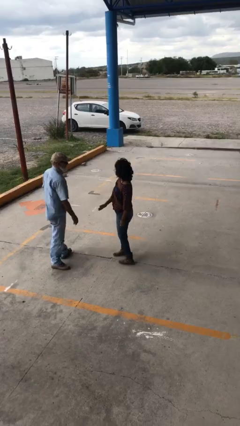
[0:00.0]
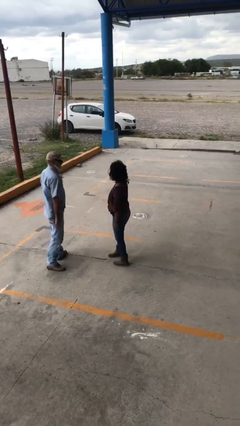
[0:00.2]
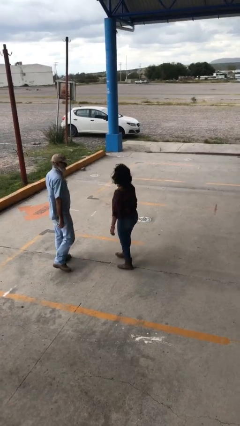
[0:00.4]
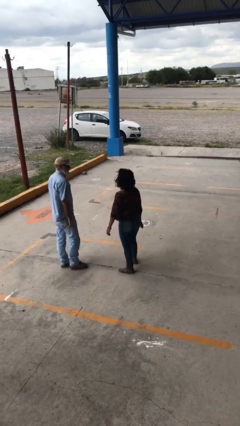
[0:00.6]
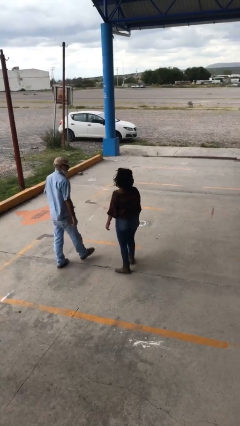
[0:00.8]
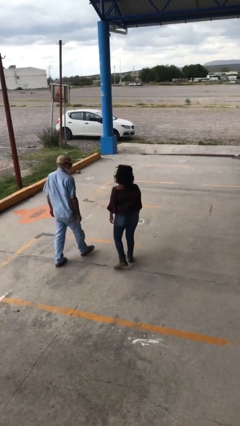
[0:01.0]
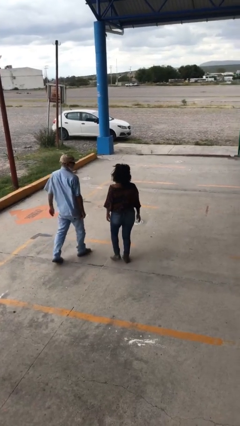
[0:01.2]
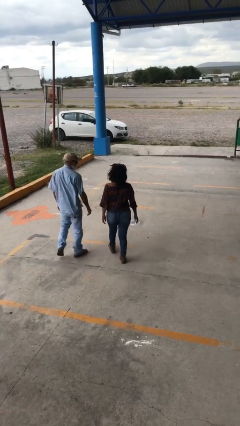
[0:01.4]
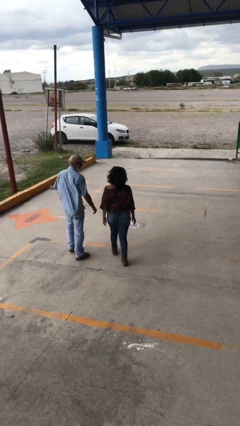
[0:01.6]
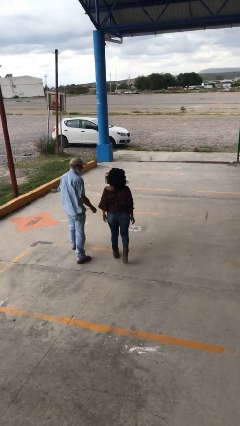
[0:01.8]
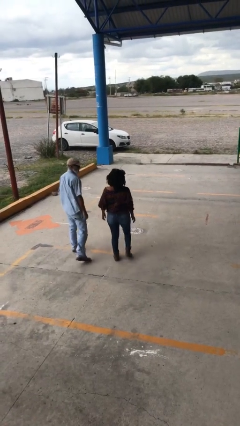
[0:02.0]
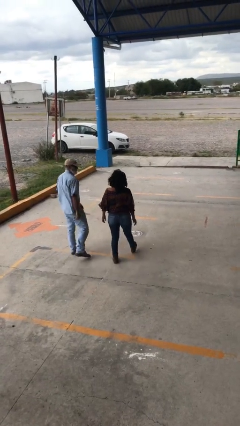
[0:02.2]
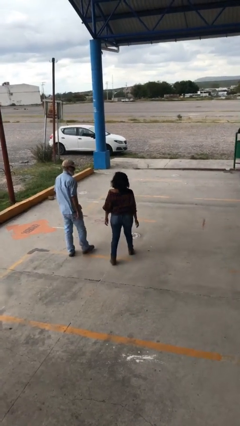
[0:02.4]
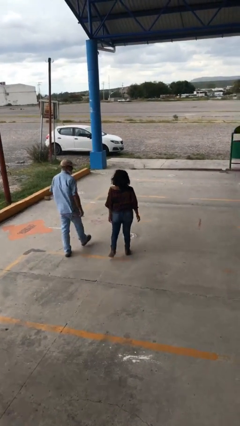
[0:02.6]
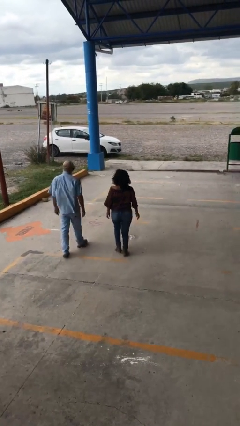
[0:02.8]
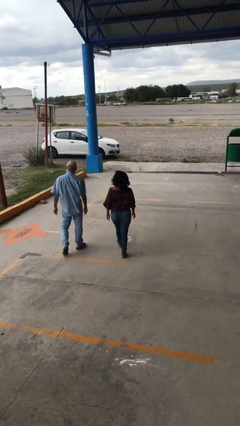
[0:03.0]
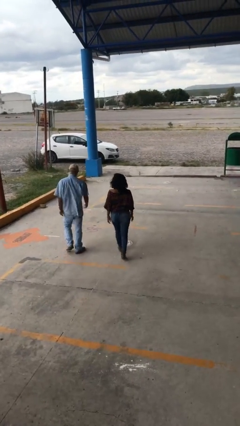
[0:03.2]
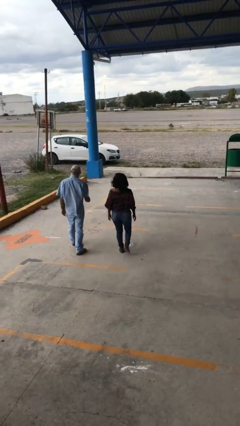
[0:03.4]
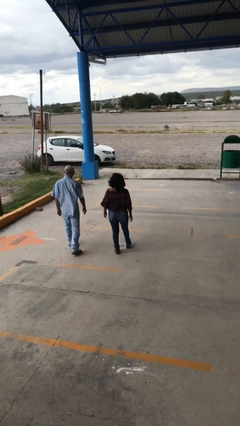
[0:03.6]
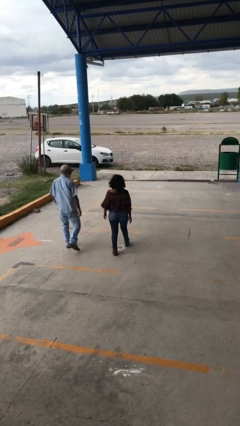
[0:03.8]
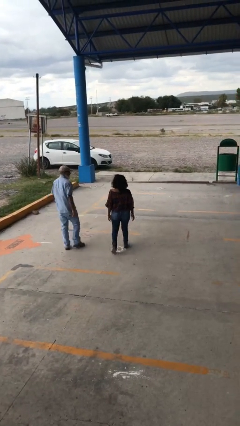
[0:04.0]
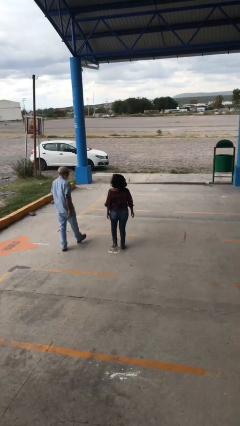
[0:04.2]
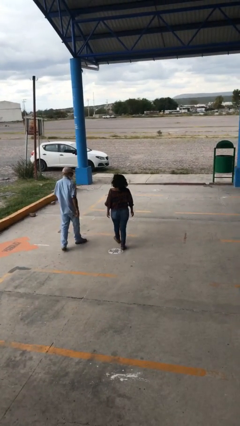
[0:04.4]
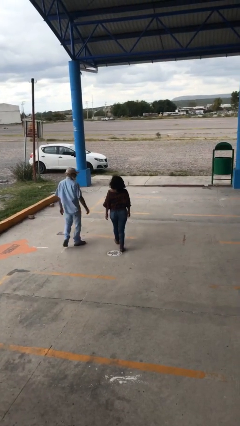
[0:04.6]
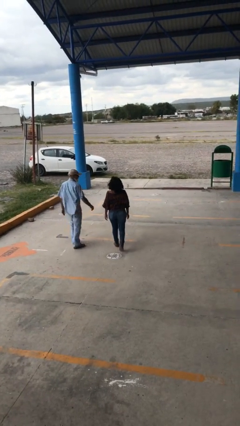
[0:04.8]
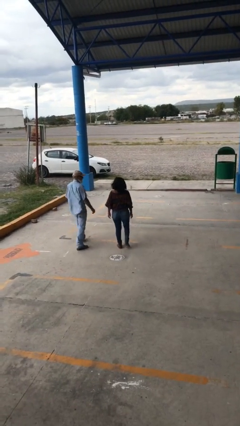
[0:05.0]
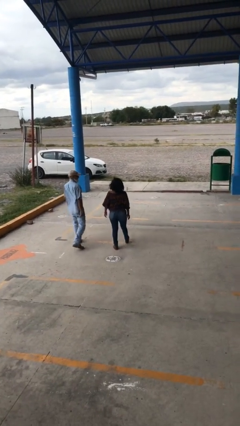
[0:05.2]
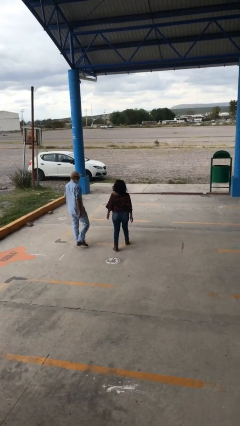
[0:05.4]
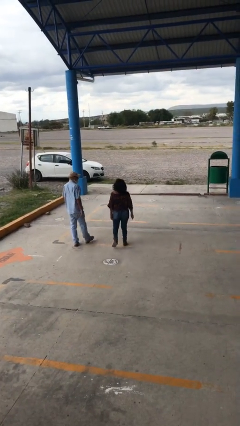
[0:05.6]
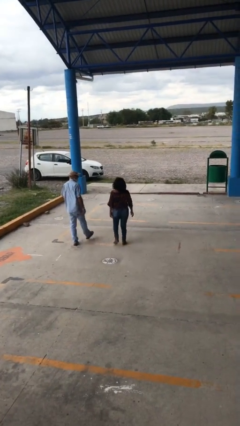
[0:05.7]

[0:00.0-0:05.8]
person talks to person

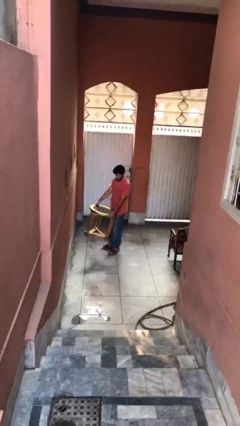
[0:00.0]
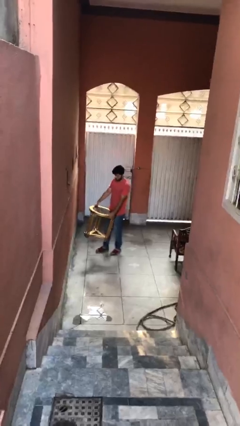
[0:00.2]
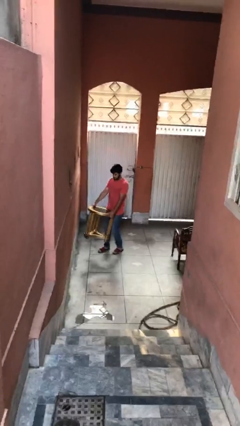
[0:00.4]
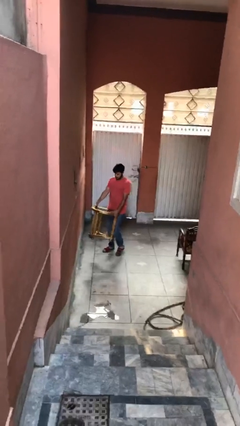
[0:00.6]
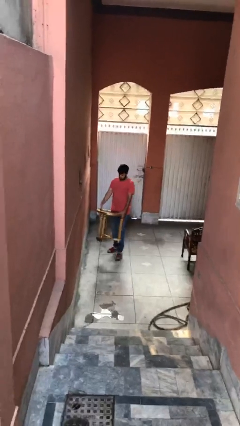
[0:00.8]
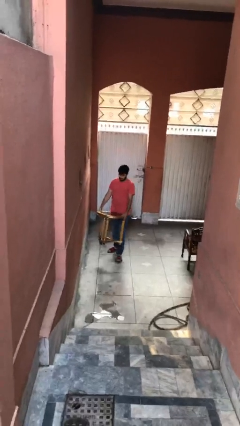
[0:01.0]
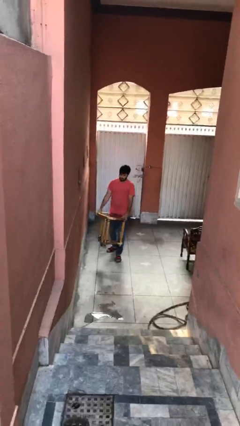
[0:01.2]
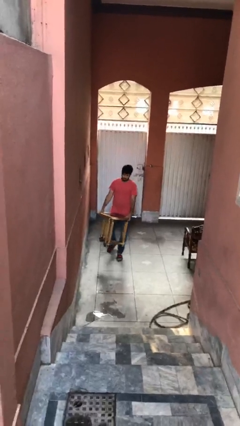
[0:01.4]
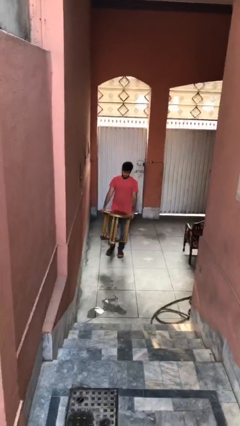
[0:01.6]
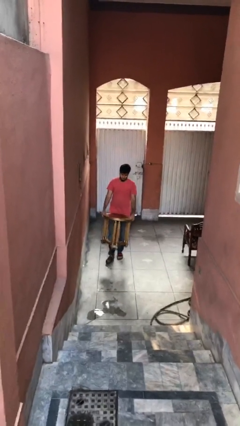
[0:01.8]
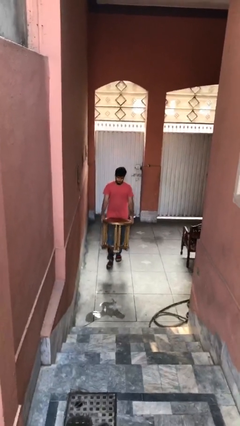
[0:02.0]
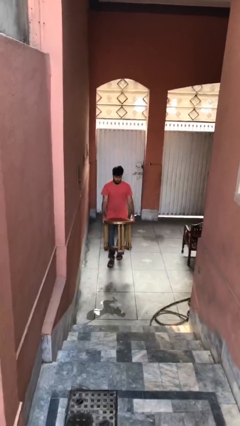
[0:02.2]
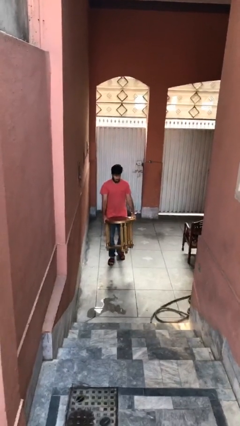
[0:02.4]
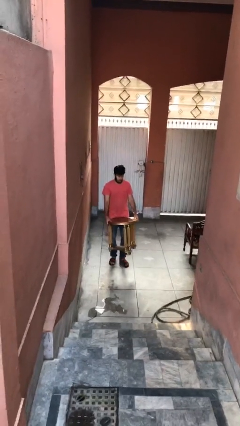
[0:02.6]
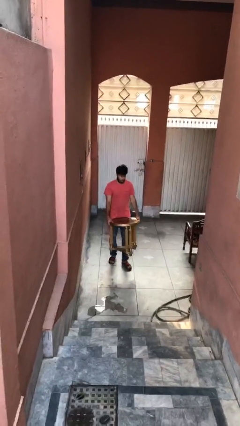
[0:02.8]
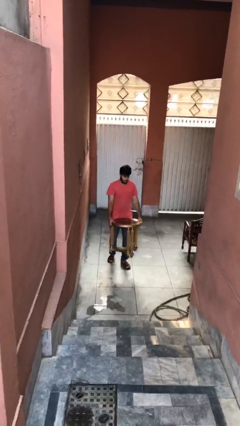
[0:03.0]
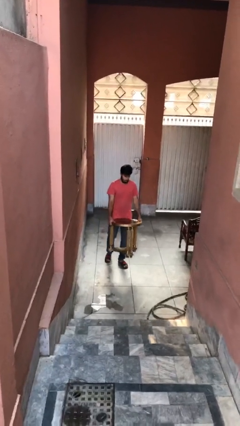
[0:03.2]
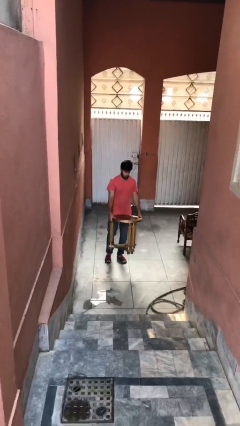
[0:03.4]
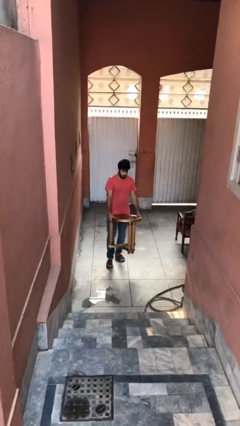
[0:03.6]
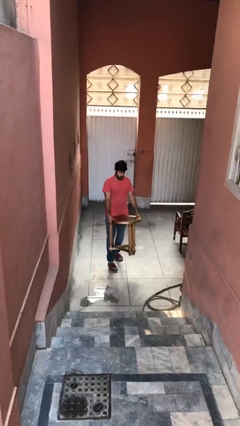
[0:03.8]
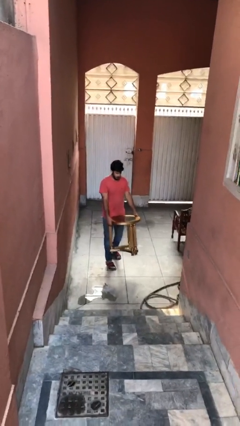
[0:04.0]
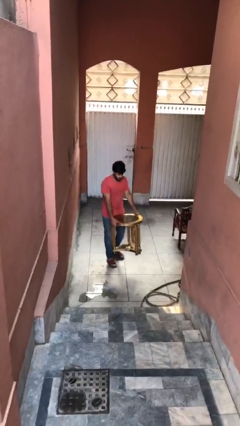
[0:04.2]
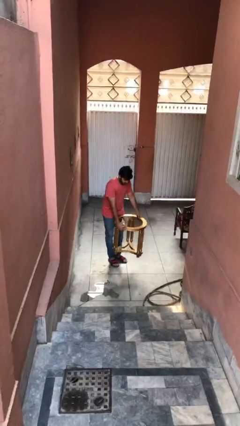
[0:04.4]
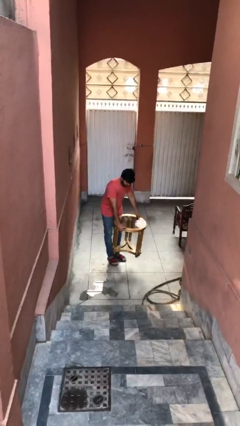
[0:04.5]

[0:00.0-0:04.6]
person carries heavy object

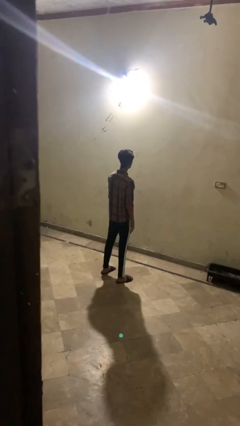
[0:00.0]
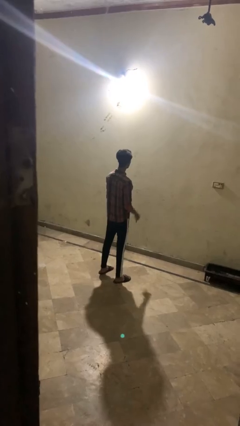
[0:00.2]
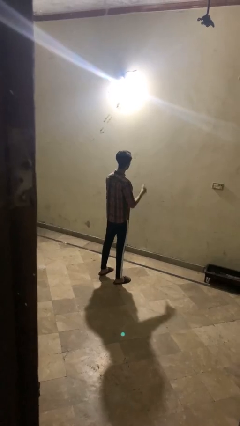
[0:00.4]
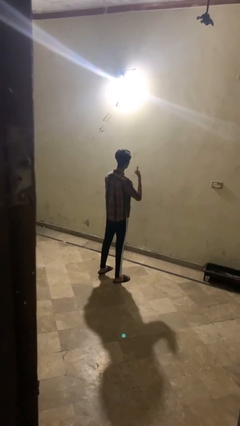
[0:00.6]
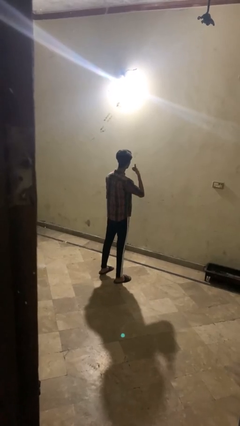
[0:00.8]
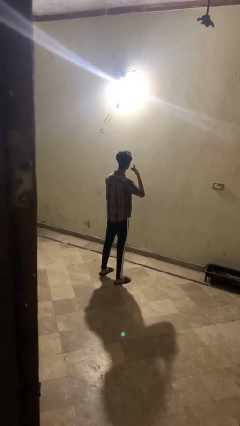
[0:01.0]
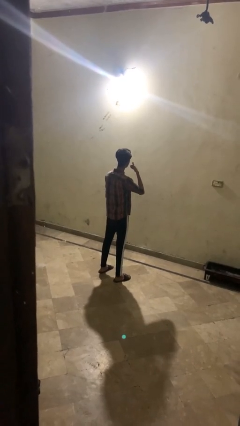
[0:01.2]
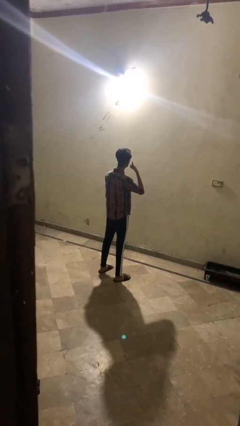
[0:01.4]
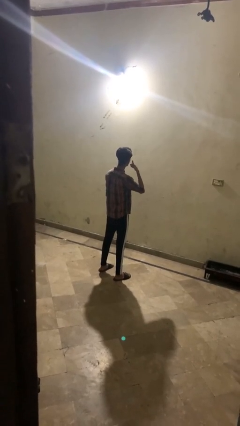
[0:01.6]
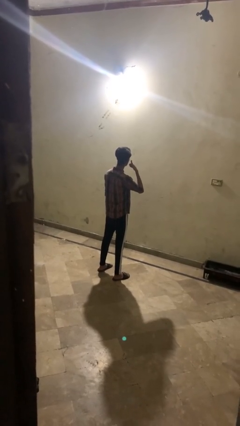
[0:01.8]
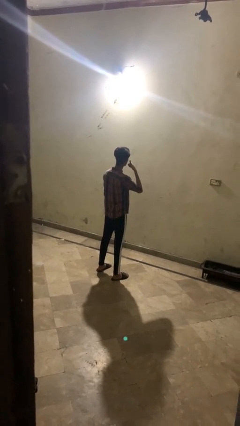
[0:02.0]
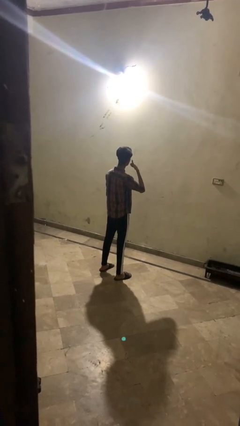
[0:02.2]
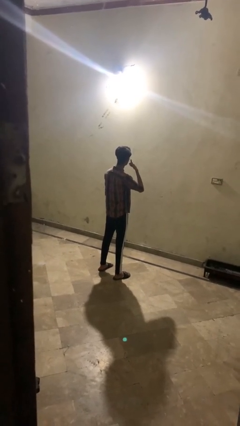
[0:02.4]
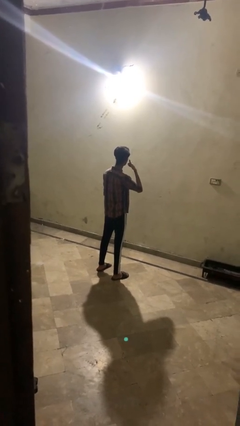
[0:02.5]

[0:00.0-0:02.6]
person gestures call me

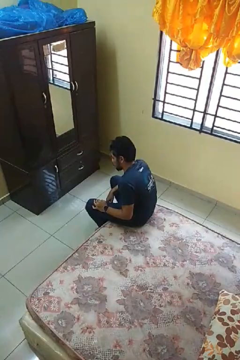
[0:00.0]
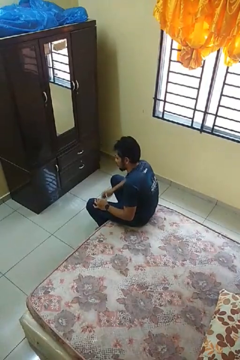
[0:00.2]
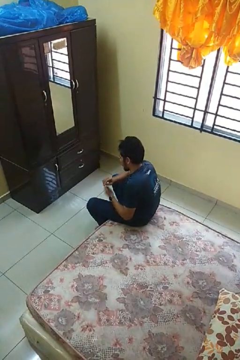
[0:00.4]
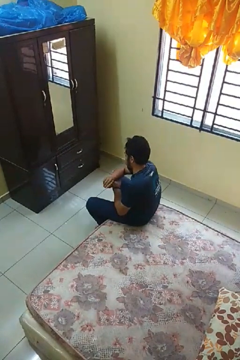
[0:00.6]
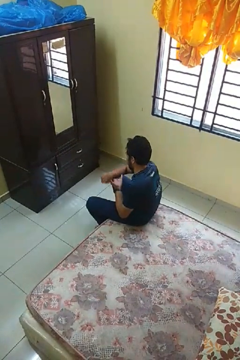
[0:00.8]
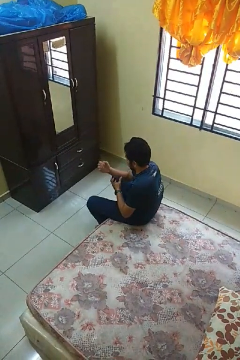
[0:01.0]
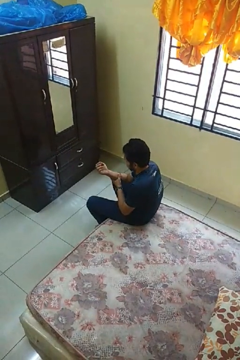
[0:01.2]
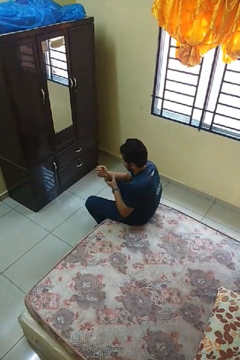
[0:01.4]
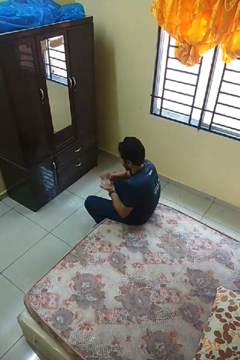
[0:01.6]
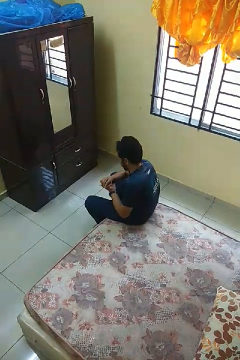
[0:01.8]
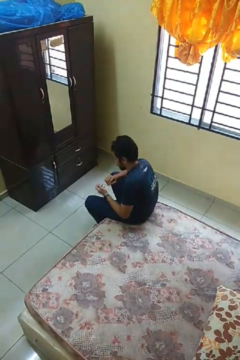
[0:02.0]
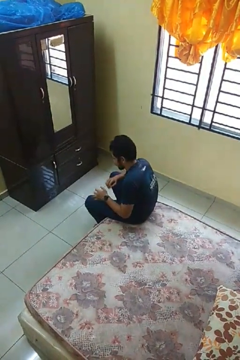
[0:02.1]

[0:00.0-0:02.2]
person looks at hands in lap

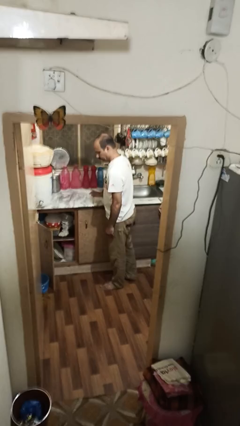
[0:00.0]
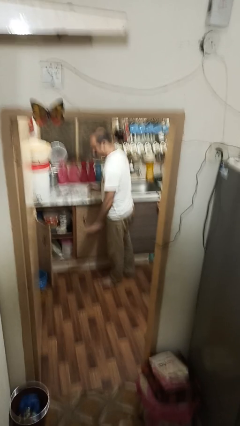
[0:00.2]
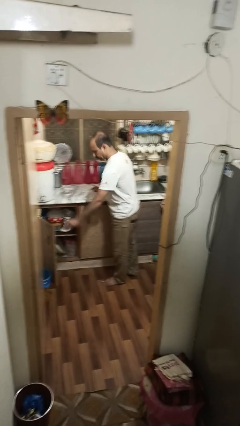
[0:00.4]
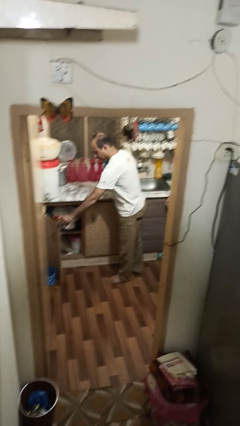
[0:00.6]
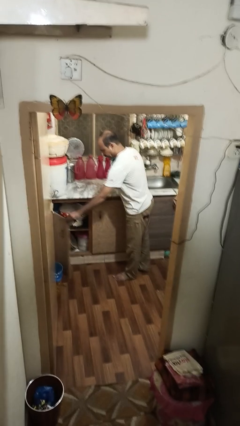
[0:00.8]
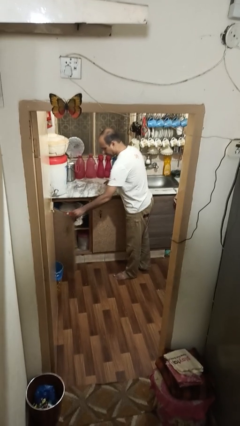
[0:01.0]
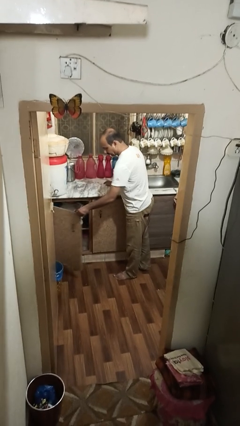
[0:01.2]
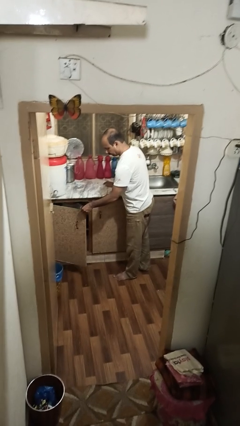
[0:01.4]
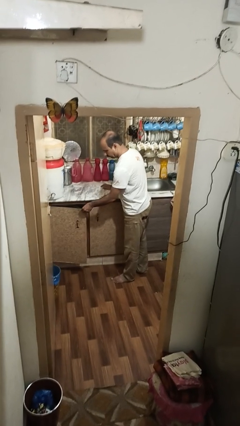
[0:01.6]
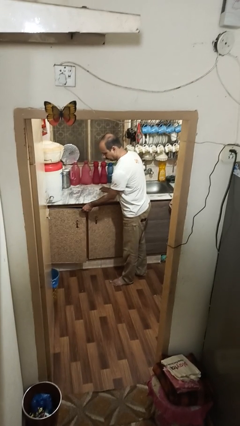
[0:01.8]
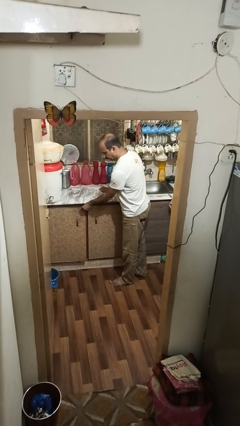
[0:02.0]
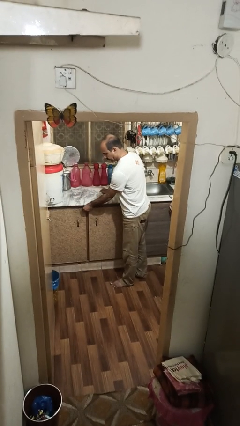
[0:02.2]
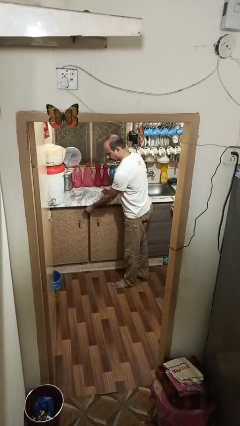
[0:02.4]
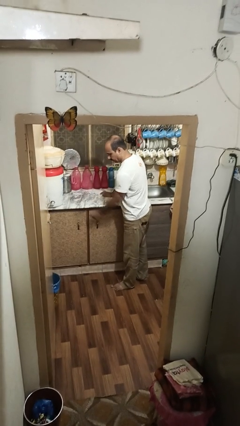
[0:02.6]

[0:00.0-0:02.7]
person closes cabinet
